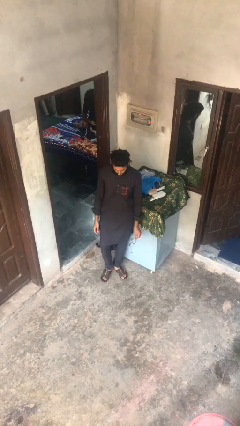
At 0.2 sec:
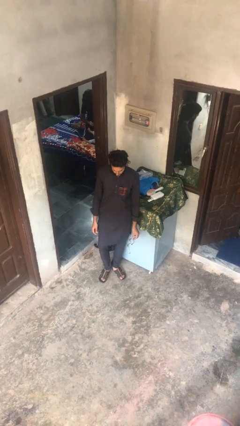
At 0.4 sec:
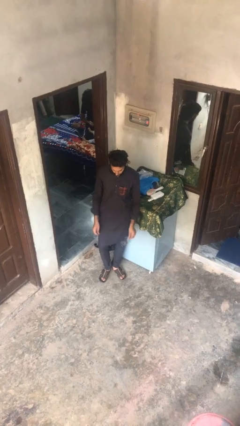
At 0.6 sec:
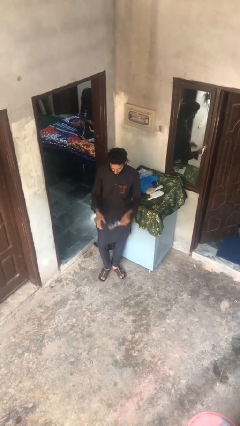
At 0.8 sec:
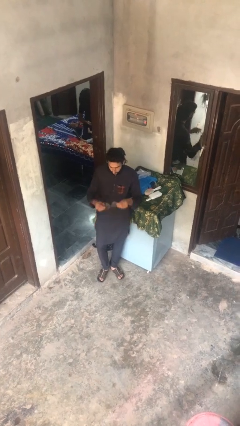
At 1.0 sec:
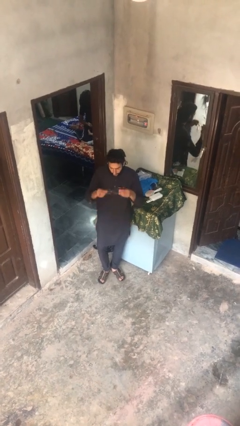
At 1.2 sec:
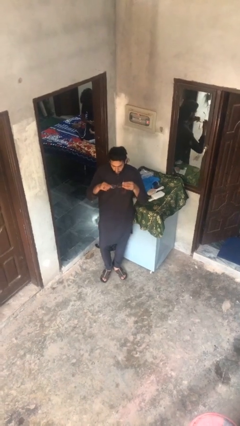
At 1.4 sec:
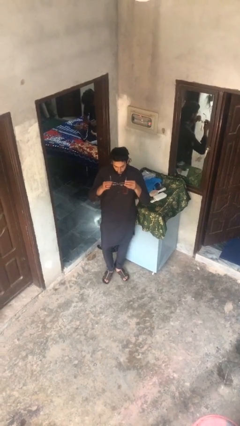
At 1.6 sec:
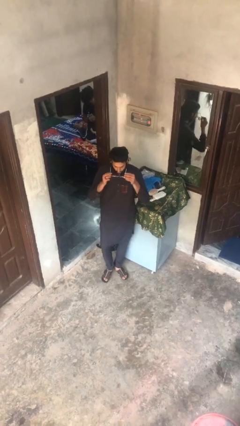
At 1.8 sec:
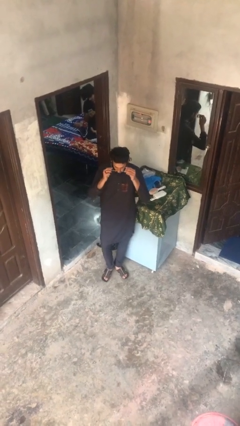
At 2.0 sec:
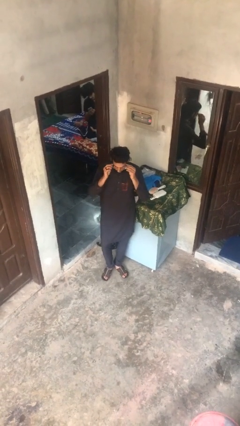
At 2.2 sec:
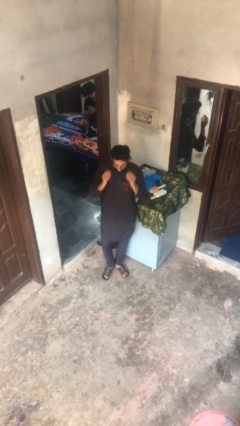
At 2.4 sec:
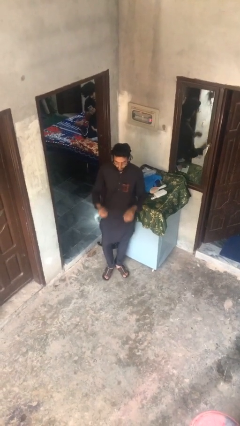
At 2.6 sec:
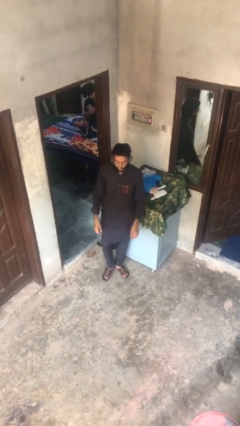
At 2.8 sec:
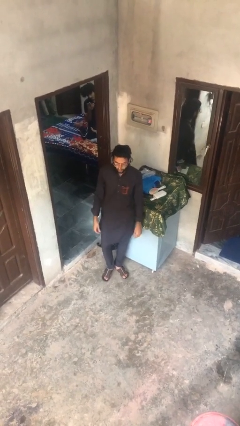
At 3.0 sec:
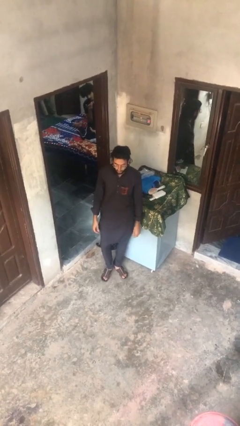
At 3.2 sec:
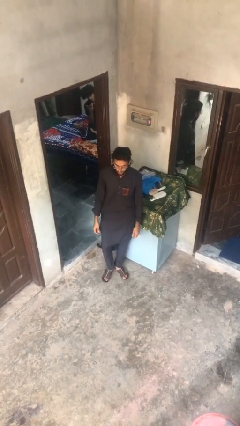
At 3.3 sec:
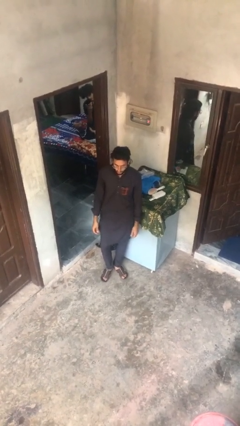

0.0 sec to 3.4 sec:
person puts on glasses

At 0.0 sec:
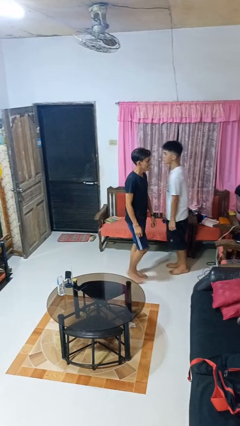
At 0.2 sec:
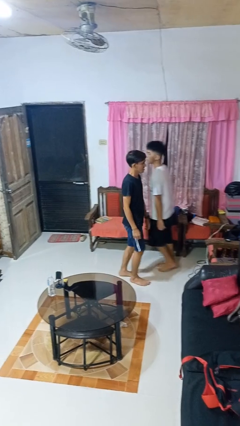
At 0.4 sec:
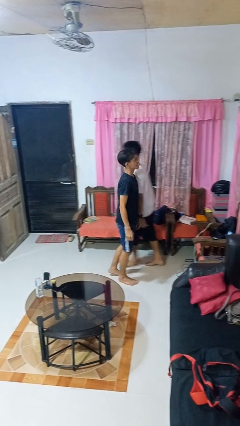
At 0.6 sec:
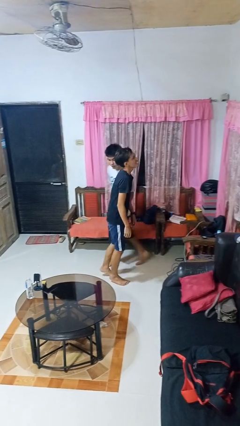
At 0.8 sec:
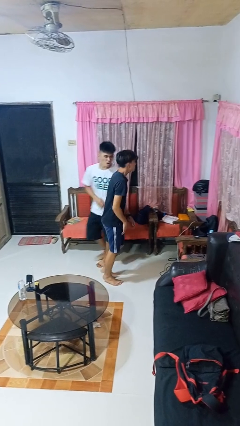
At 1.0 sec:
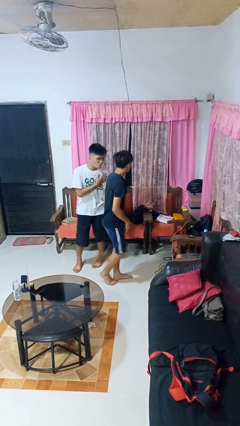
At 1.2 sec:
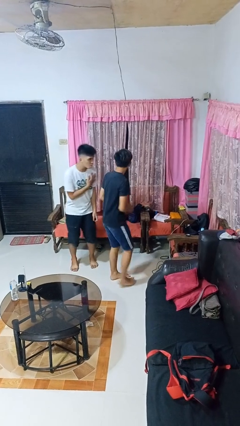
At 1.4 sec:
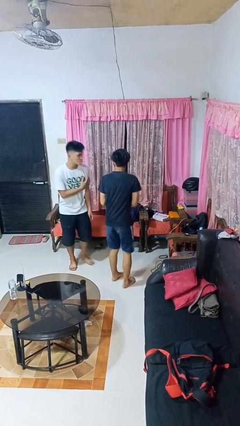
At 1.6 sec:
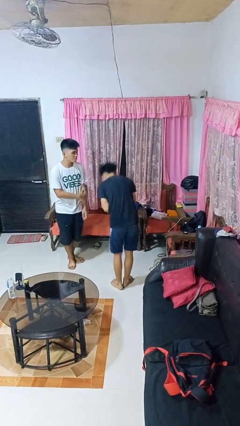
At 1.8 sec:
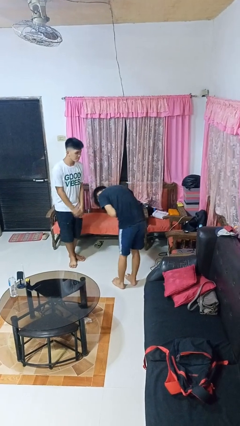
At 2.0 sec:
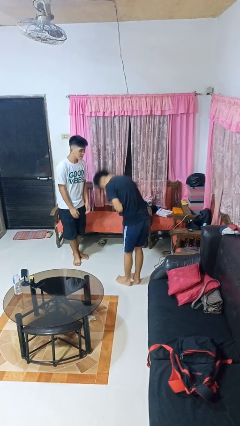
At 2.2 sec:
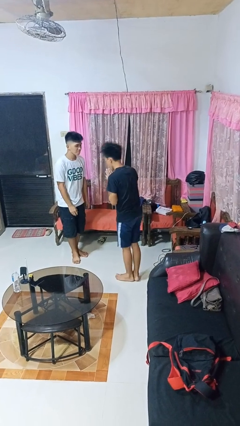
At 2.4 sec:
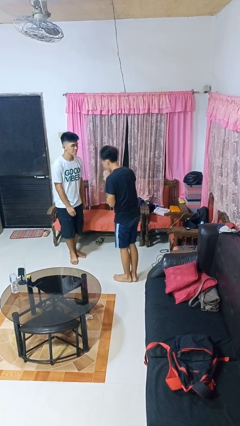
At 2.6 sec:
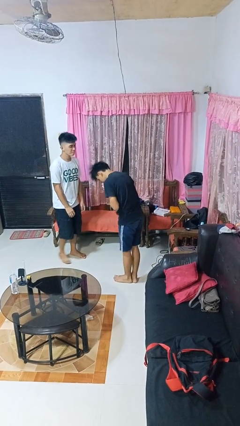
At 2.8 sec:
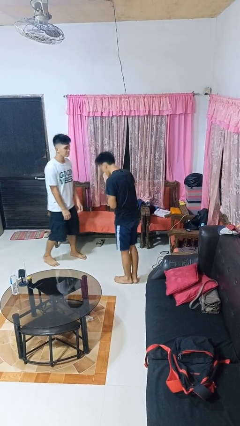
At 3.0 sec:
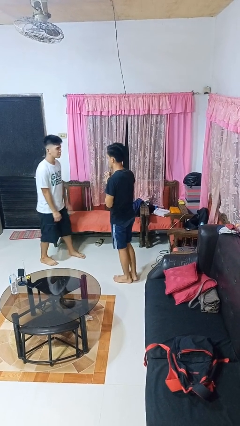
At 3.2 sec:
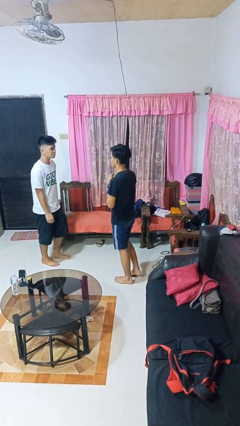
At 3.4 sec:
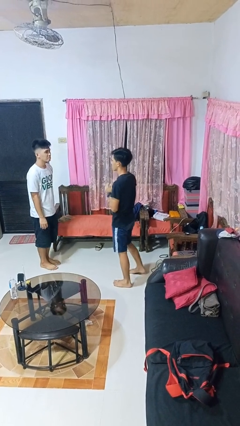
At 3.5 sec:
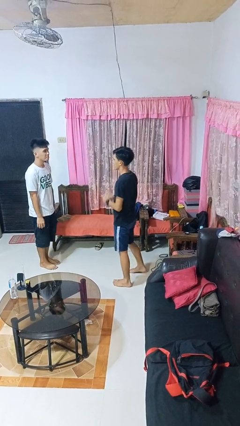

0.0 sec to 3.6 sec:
person bumps into person

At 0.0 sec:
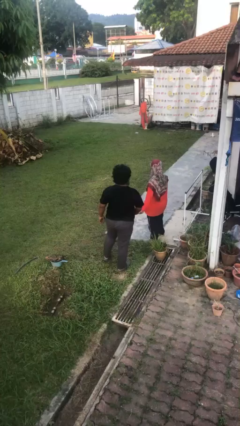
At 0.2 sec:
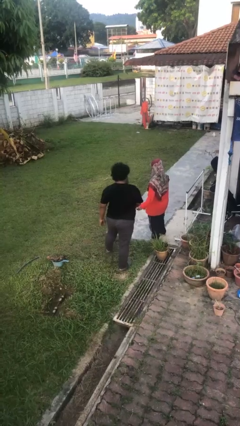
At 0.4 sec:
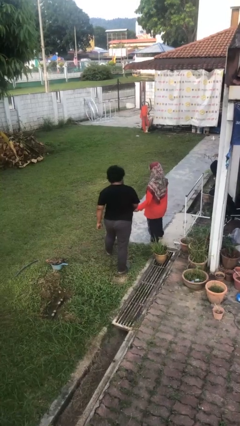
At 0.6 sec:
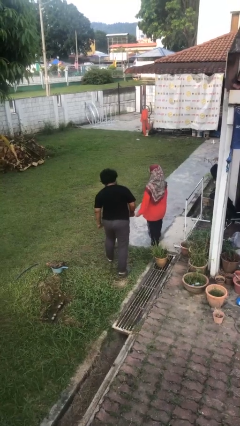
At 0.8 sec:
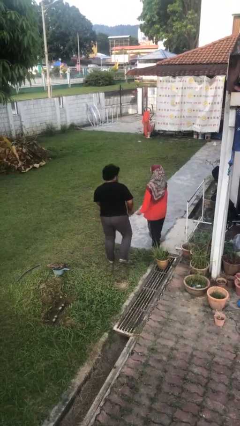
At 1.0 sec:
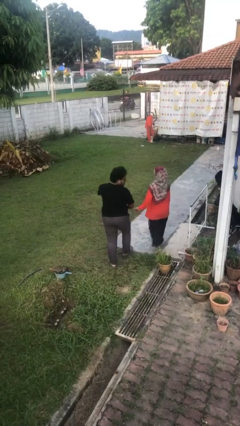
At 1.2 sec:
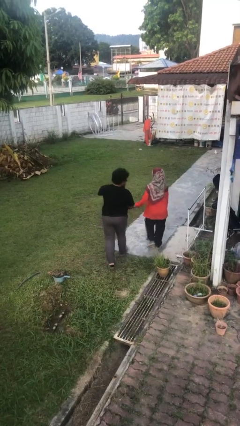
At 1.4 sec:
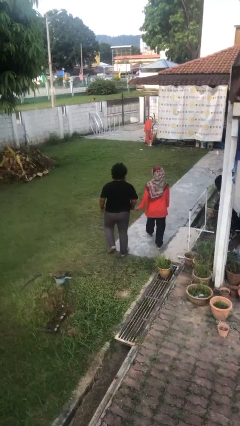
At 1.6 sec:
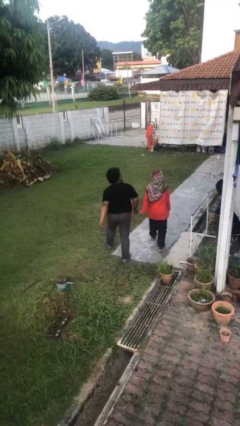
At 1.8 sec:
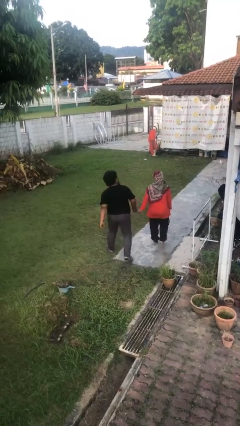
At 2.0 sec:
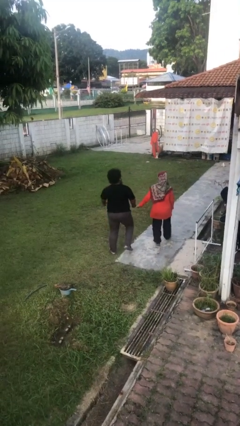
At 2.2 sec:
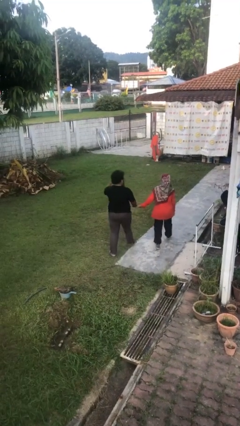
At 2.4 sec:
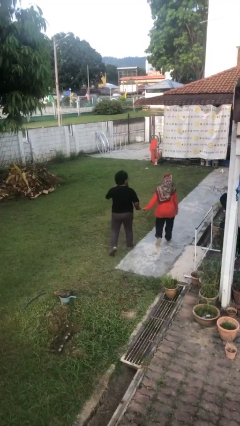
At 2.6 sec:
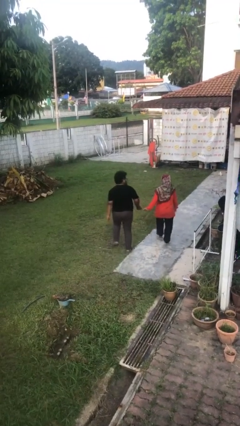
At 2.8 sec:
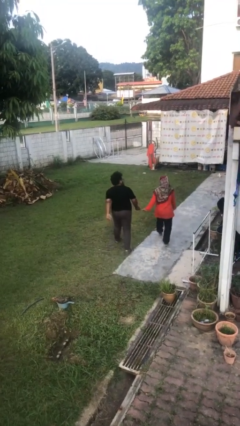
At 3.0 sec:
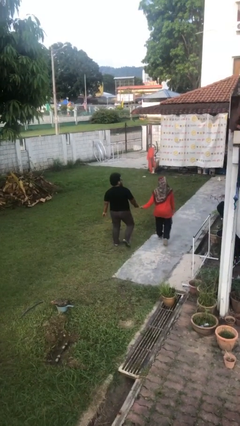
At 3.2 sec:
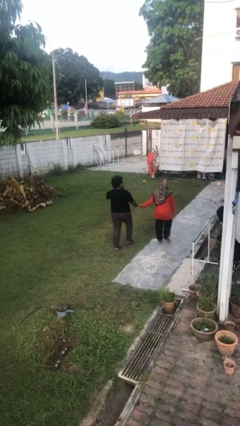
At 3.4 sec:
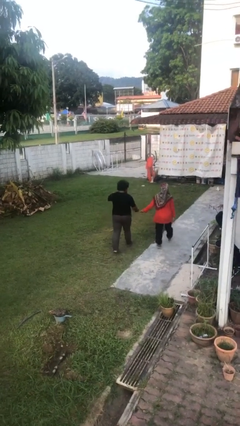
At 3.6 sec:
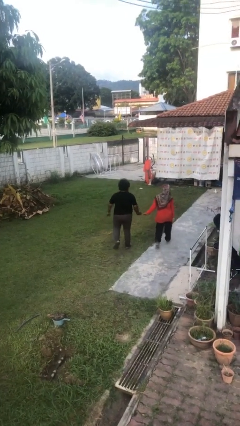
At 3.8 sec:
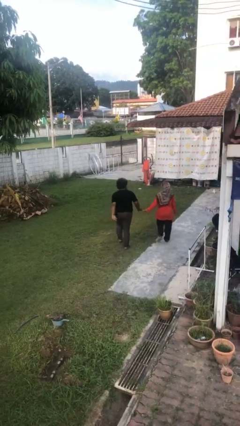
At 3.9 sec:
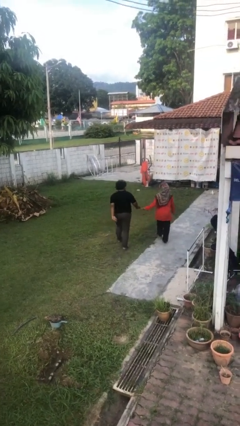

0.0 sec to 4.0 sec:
person holds hand

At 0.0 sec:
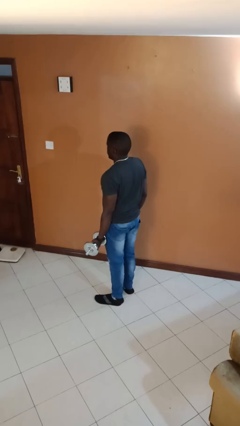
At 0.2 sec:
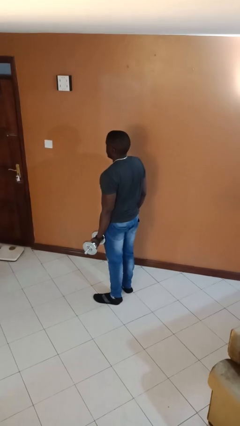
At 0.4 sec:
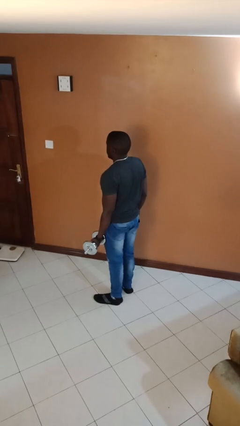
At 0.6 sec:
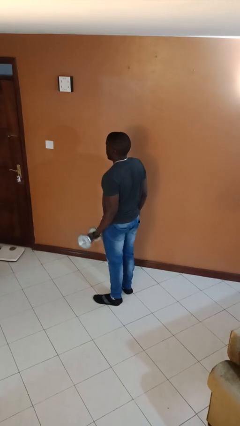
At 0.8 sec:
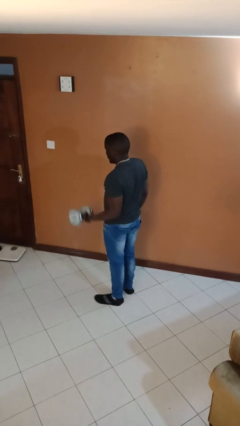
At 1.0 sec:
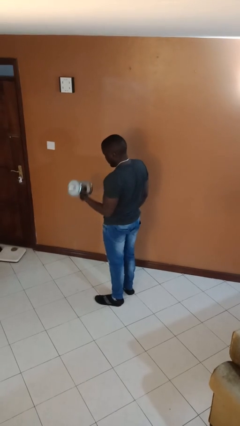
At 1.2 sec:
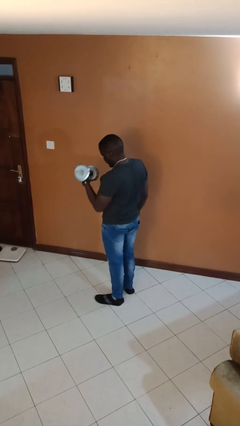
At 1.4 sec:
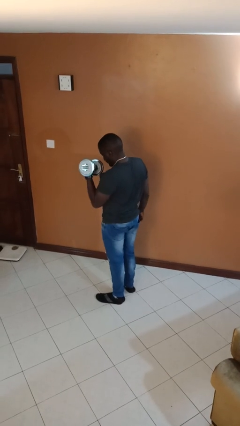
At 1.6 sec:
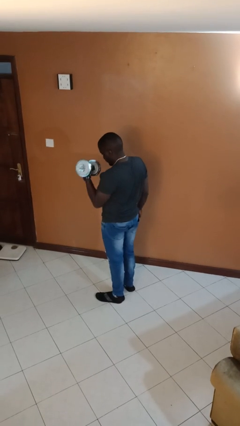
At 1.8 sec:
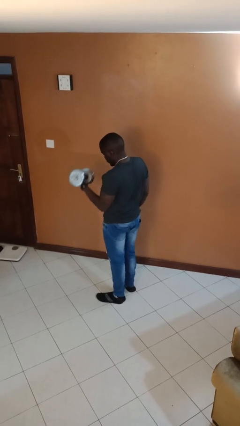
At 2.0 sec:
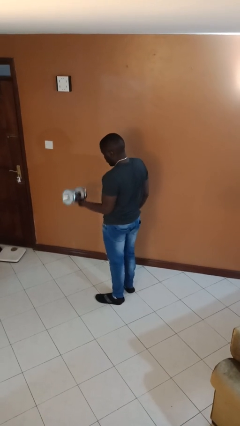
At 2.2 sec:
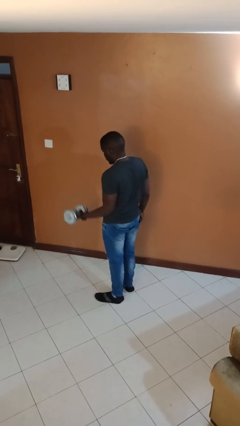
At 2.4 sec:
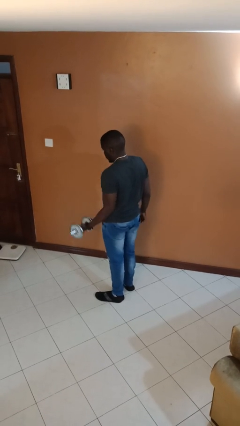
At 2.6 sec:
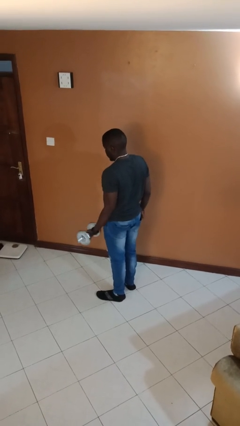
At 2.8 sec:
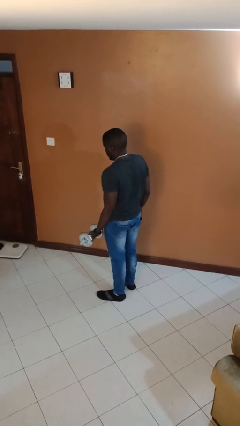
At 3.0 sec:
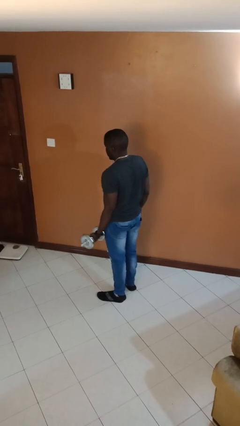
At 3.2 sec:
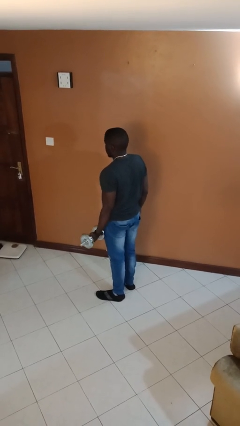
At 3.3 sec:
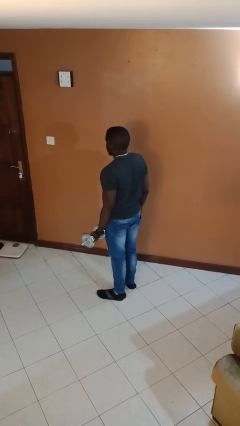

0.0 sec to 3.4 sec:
person lifts dumbbells

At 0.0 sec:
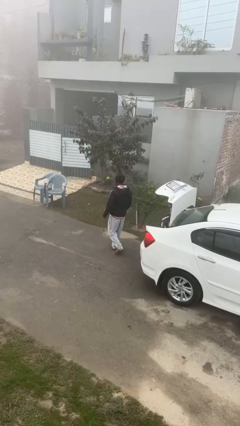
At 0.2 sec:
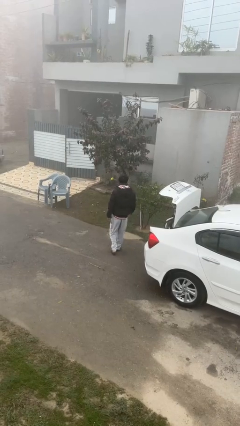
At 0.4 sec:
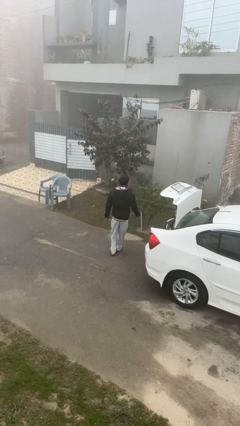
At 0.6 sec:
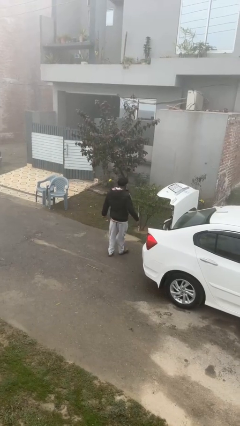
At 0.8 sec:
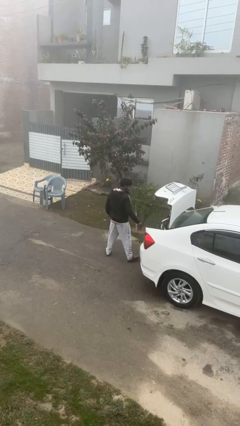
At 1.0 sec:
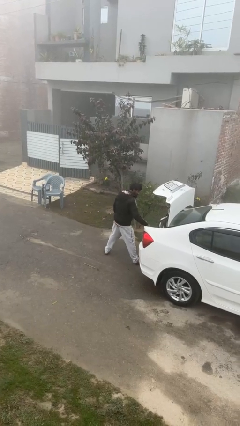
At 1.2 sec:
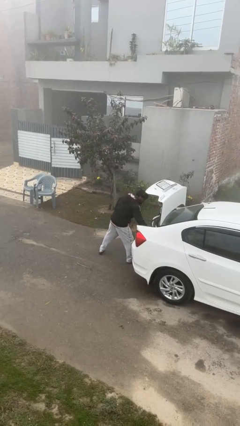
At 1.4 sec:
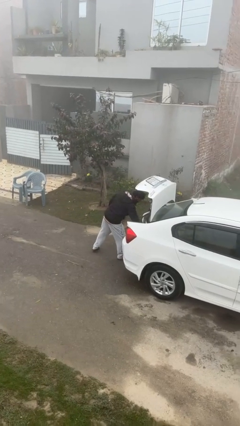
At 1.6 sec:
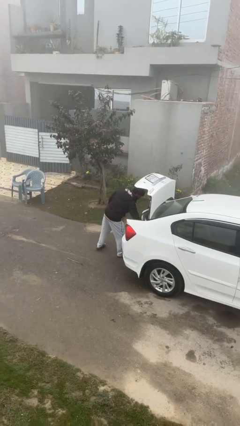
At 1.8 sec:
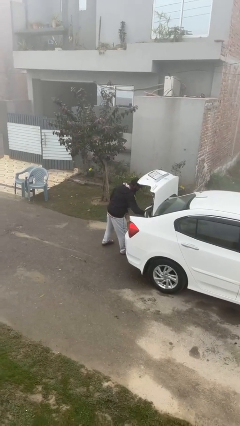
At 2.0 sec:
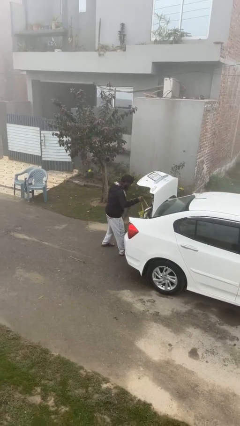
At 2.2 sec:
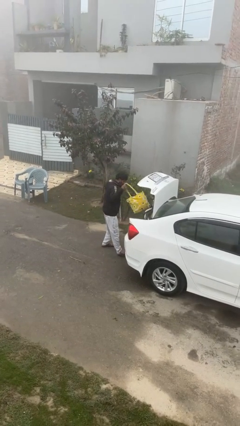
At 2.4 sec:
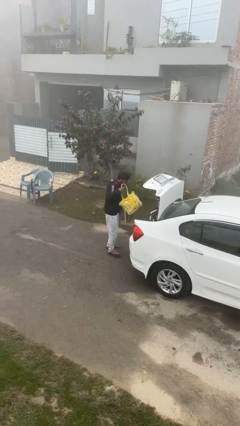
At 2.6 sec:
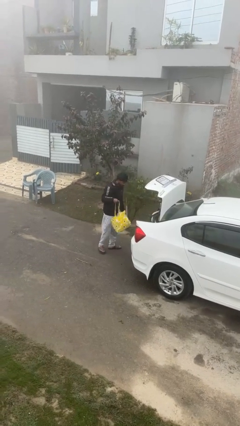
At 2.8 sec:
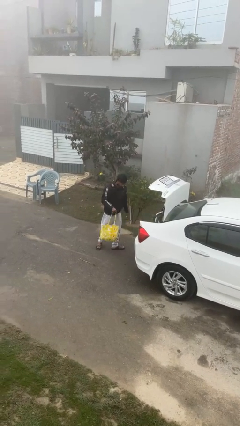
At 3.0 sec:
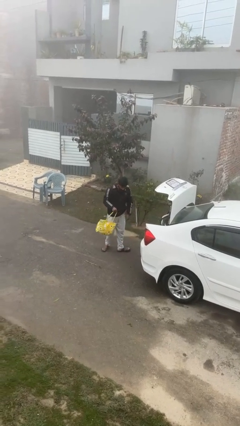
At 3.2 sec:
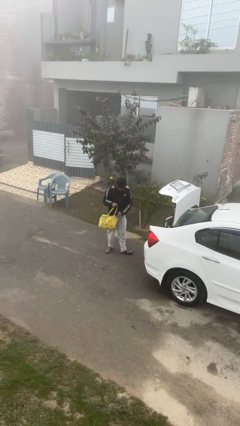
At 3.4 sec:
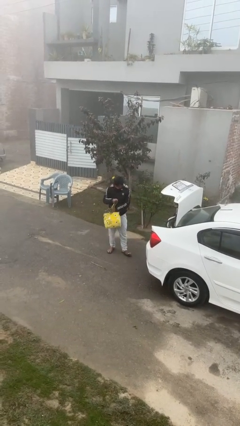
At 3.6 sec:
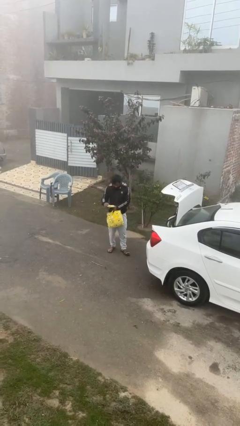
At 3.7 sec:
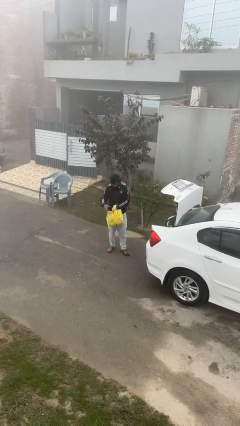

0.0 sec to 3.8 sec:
person unloads car
